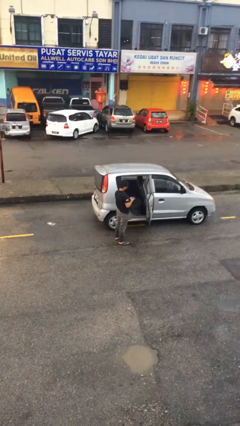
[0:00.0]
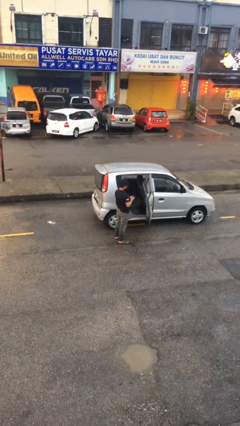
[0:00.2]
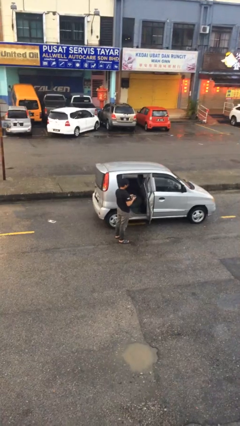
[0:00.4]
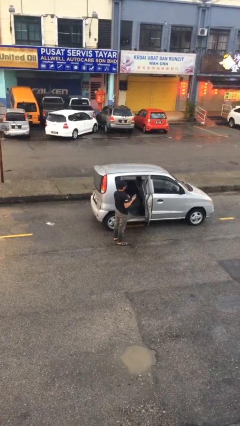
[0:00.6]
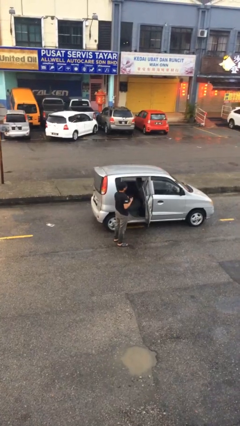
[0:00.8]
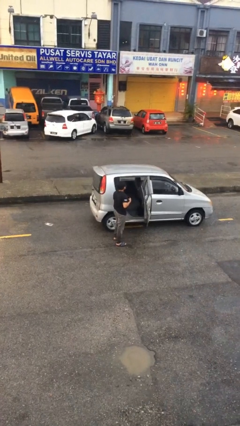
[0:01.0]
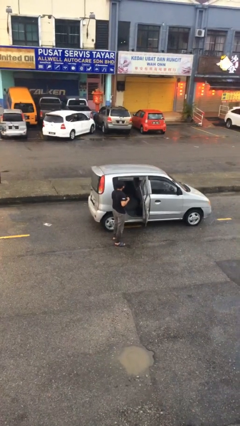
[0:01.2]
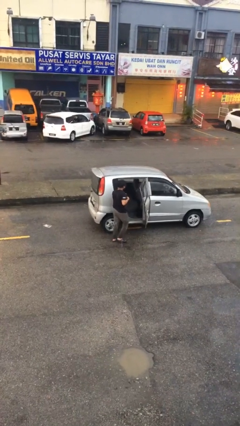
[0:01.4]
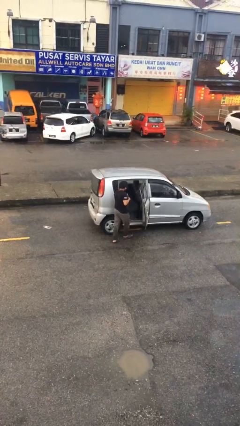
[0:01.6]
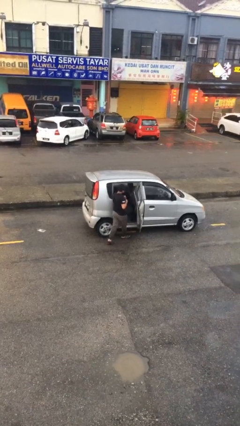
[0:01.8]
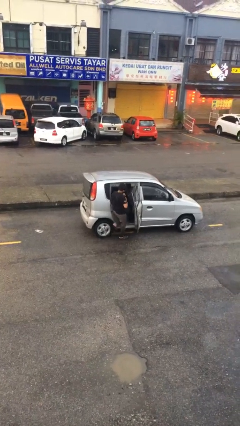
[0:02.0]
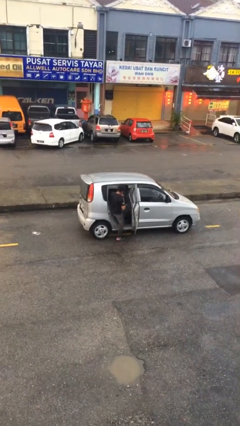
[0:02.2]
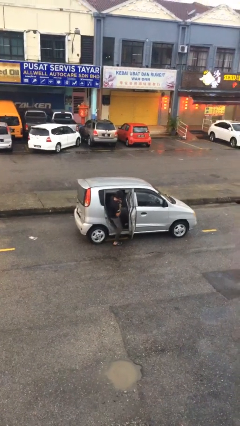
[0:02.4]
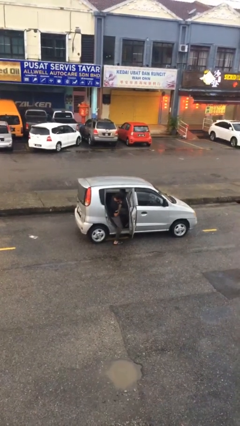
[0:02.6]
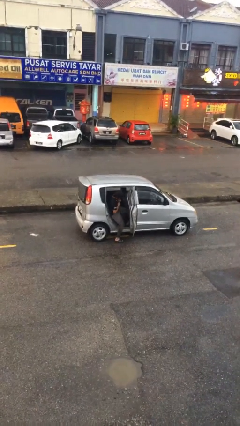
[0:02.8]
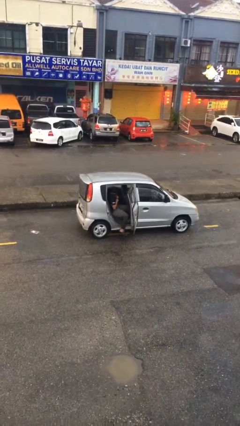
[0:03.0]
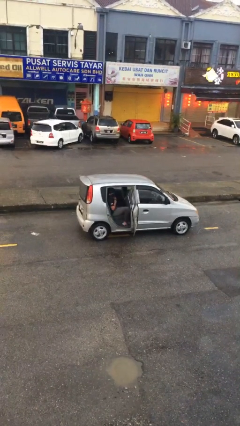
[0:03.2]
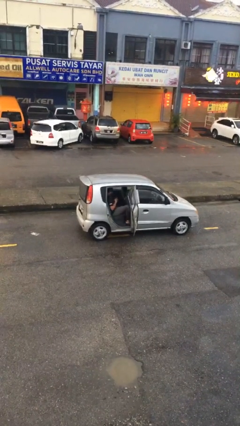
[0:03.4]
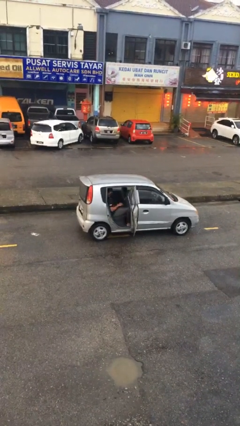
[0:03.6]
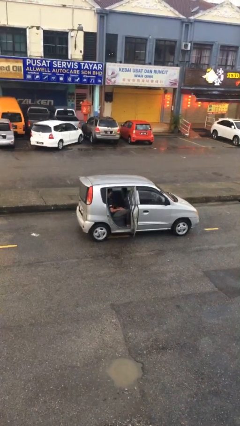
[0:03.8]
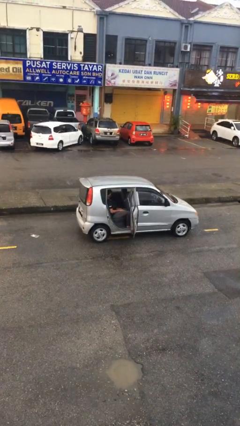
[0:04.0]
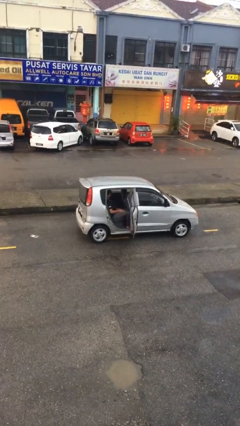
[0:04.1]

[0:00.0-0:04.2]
person enters car

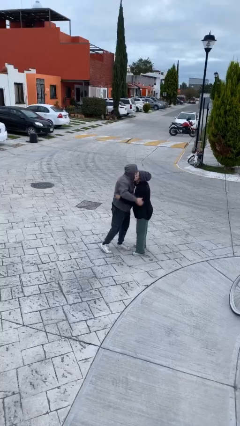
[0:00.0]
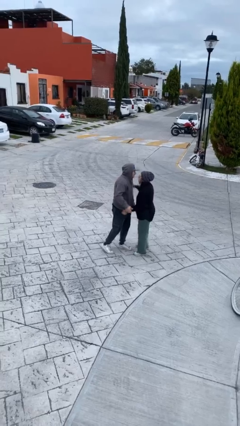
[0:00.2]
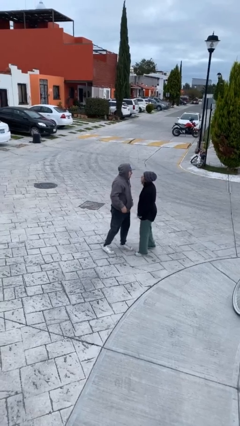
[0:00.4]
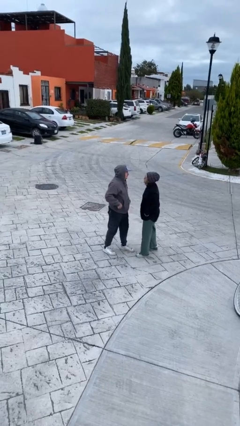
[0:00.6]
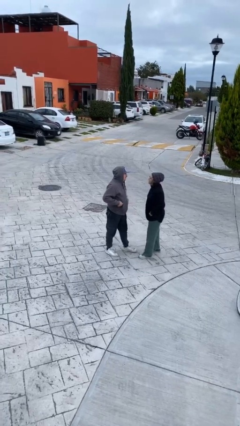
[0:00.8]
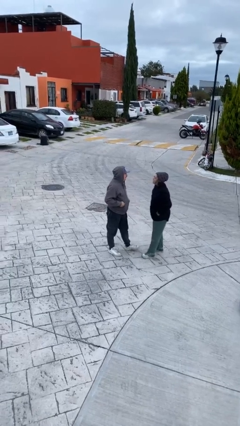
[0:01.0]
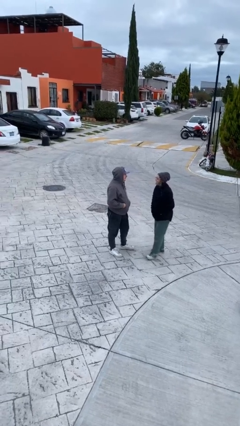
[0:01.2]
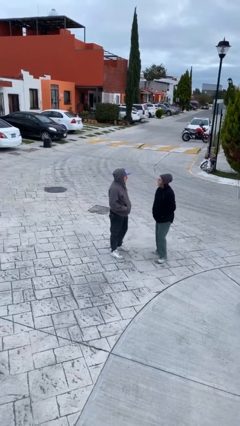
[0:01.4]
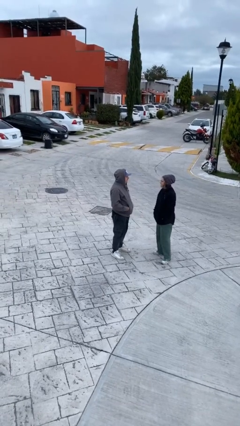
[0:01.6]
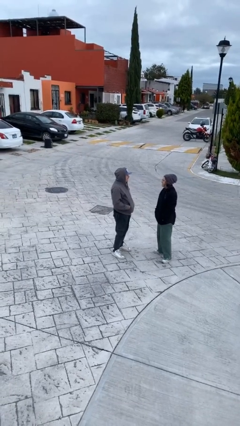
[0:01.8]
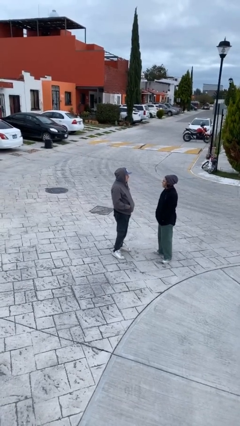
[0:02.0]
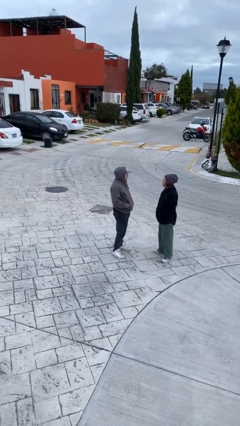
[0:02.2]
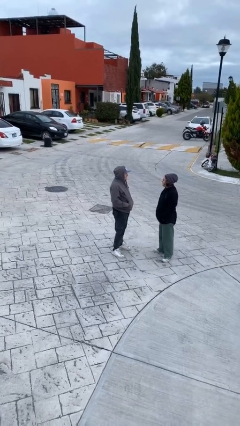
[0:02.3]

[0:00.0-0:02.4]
person talks to person

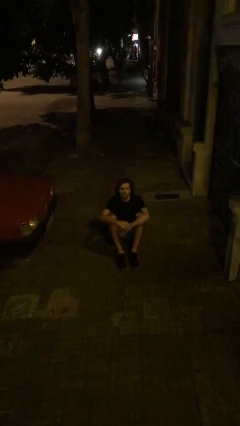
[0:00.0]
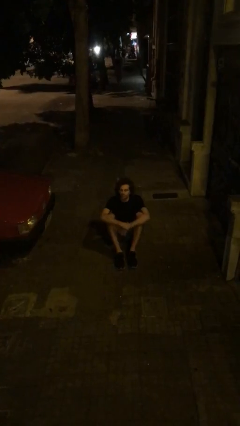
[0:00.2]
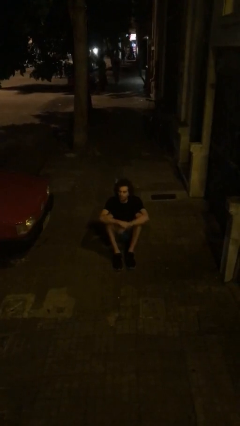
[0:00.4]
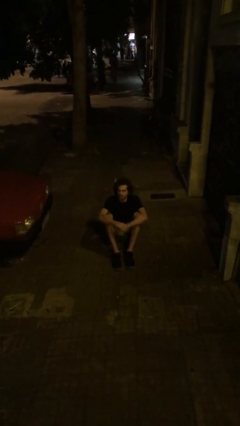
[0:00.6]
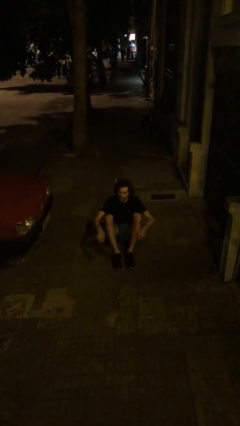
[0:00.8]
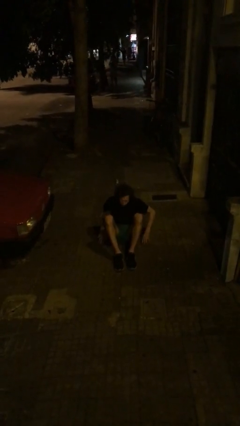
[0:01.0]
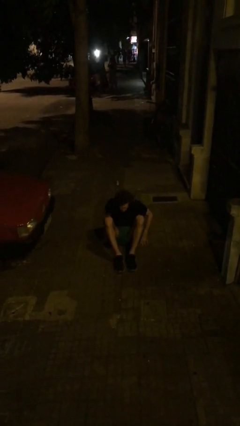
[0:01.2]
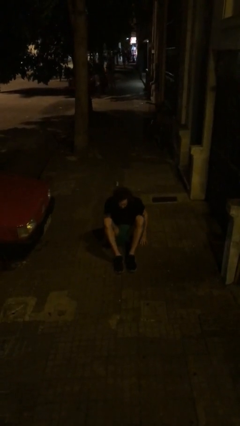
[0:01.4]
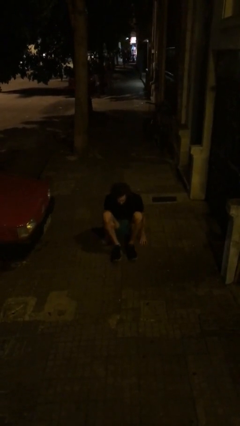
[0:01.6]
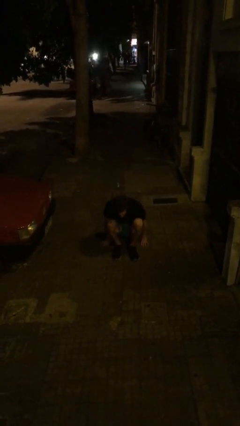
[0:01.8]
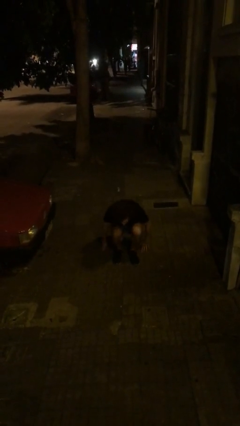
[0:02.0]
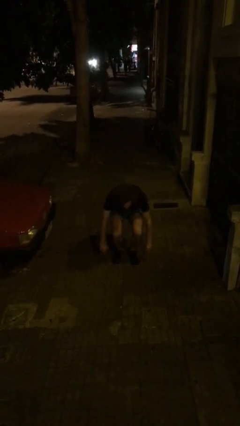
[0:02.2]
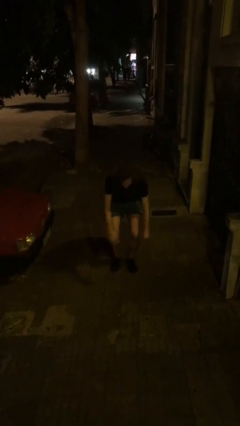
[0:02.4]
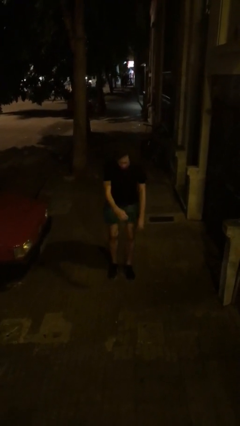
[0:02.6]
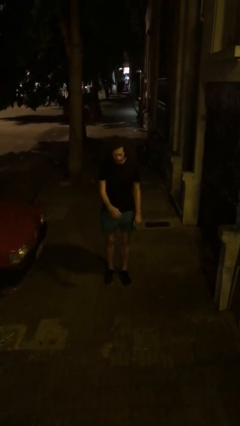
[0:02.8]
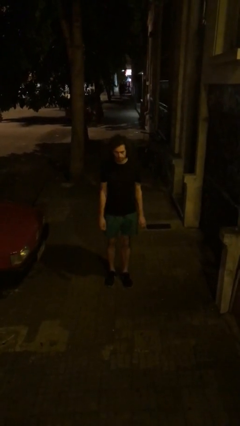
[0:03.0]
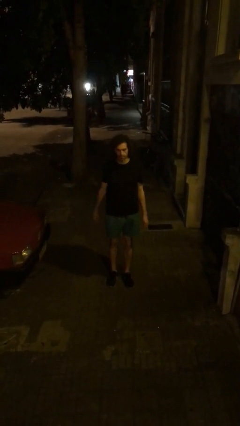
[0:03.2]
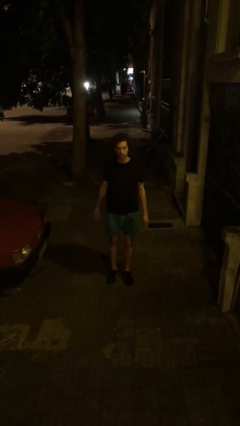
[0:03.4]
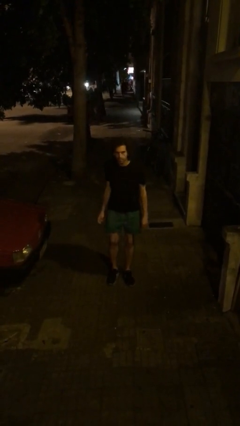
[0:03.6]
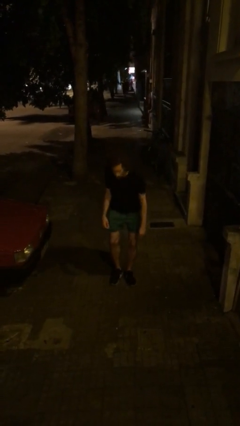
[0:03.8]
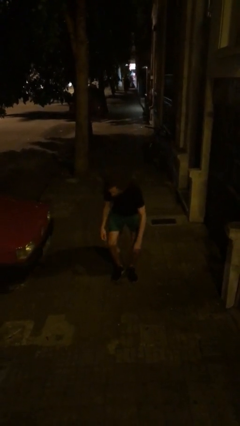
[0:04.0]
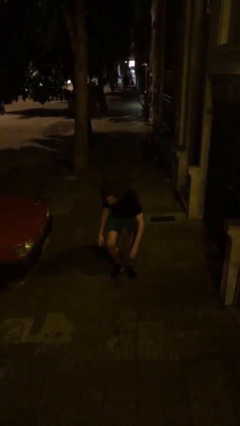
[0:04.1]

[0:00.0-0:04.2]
person stands up

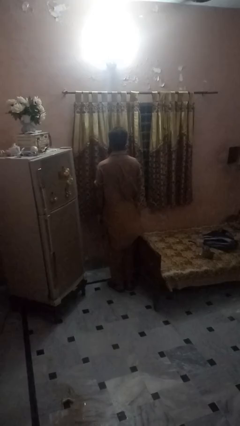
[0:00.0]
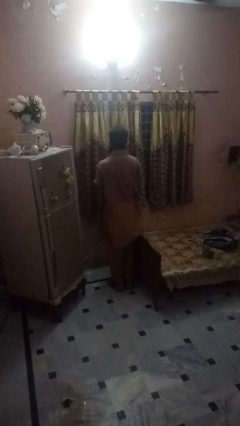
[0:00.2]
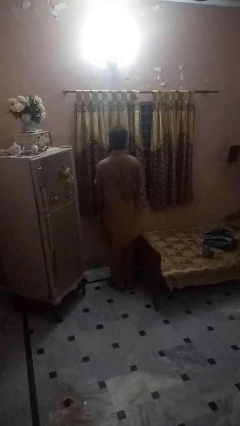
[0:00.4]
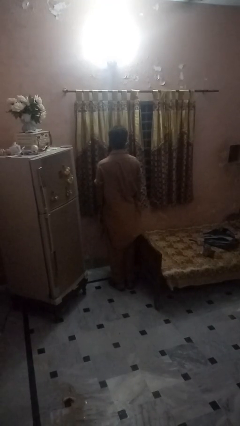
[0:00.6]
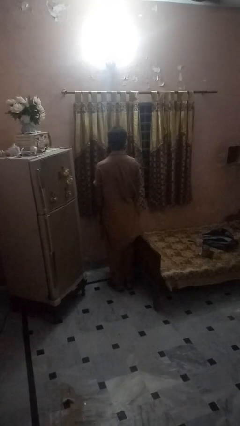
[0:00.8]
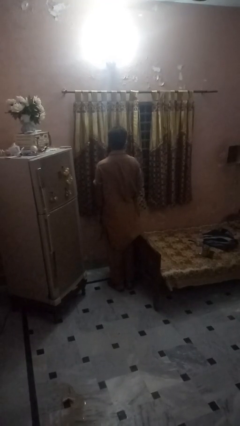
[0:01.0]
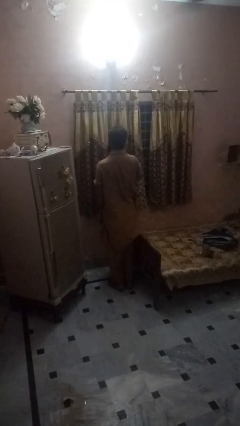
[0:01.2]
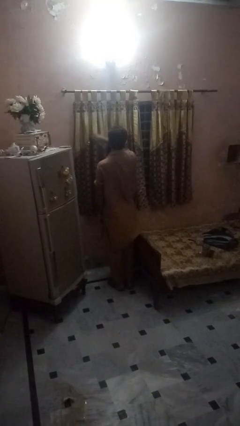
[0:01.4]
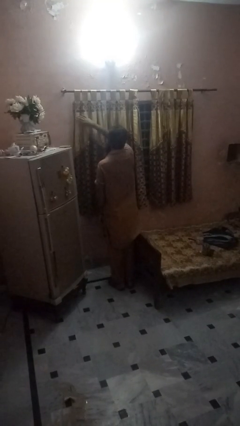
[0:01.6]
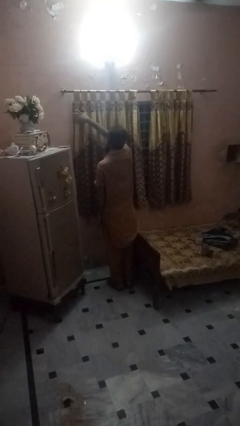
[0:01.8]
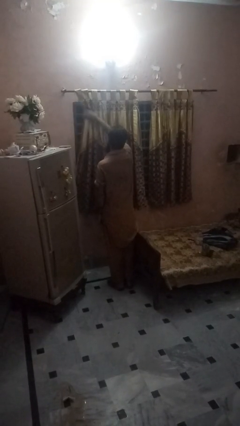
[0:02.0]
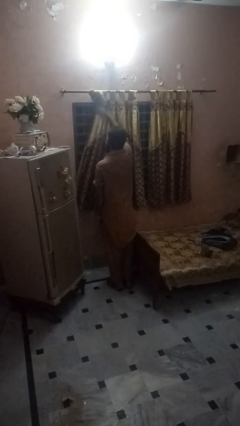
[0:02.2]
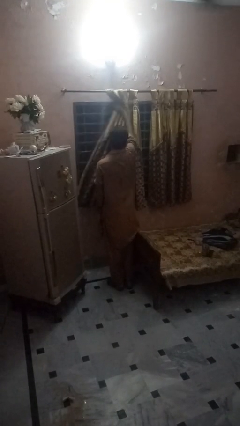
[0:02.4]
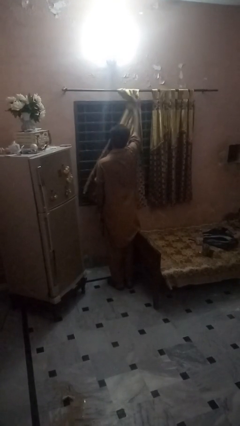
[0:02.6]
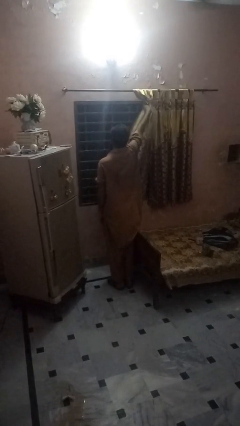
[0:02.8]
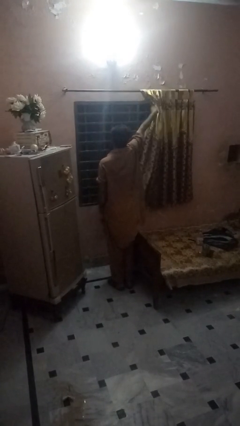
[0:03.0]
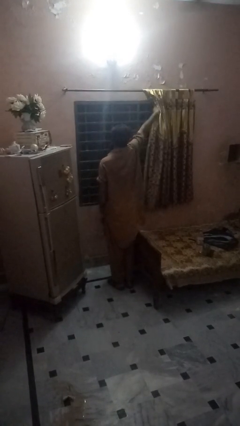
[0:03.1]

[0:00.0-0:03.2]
person opens curtains

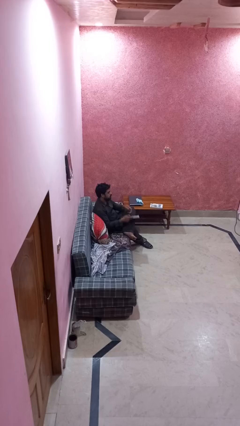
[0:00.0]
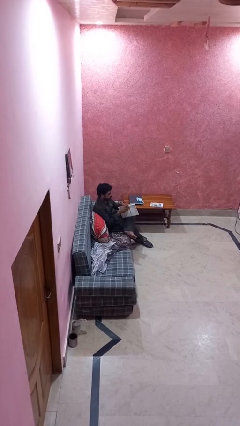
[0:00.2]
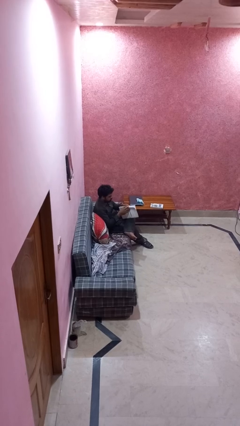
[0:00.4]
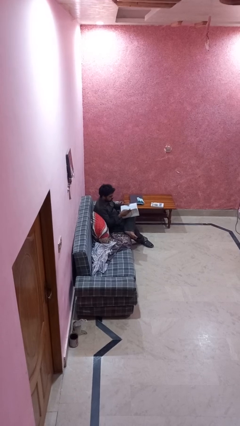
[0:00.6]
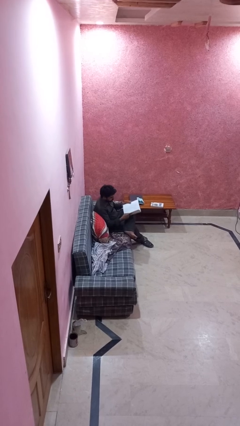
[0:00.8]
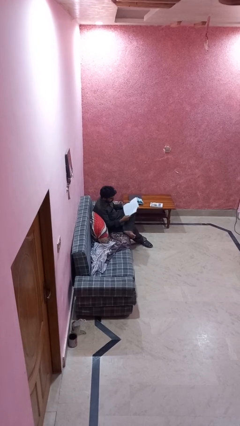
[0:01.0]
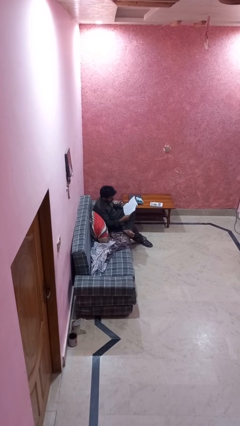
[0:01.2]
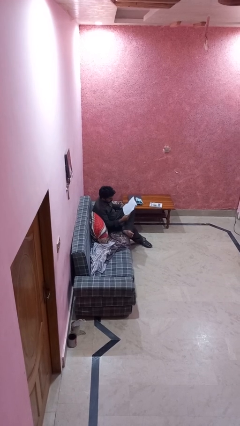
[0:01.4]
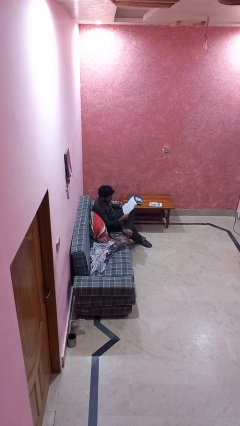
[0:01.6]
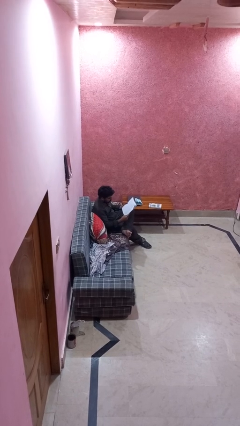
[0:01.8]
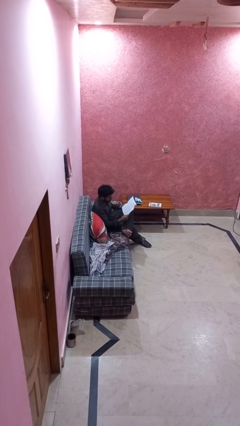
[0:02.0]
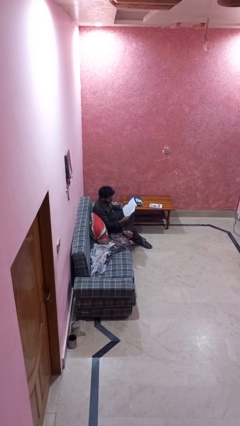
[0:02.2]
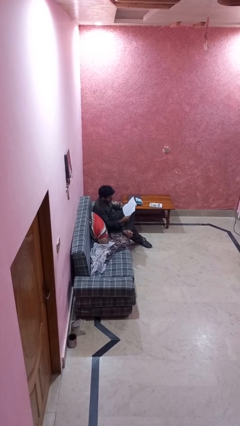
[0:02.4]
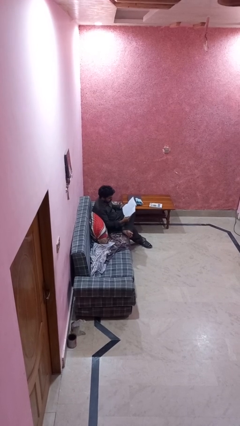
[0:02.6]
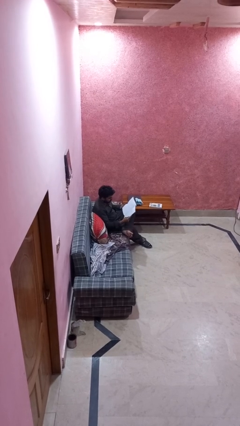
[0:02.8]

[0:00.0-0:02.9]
person reads magazine

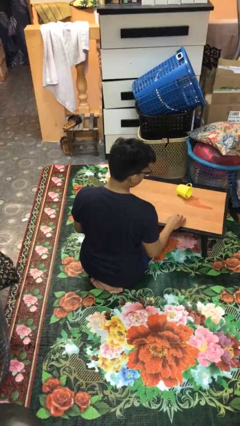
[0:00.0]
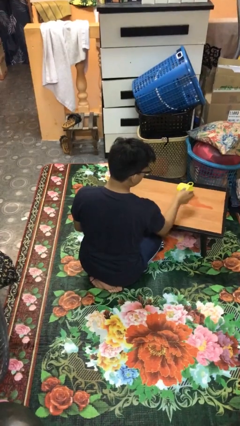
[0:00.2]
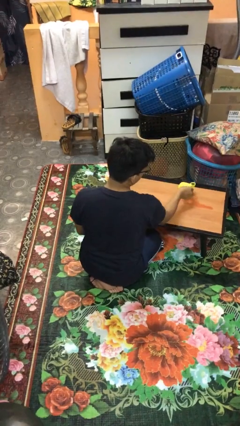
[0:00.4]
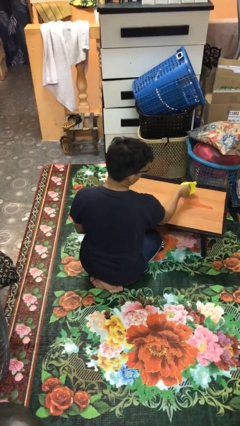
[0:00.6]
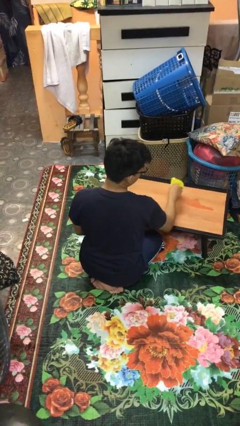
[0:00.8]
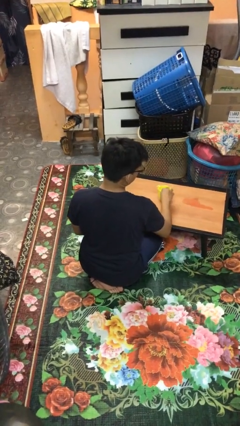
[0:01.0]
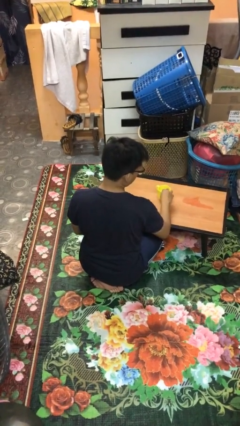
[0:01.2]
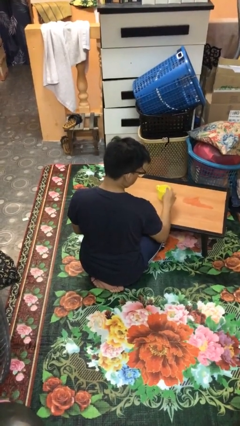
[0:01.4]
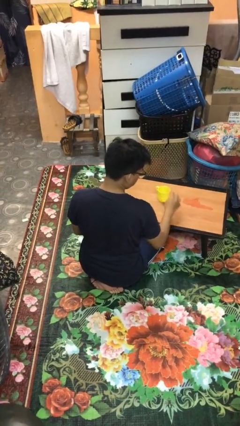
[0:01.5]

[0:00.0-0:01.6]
person sets upright glass
